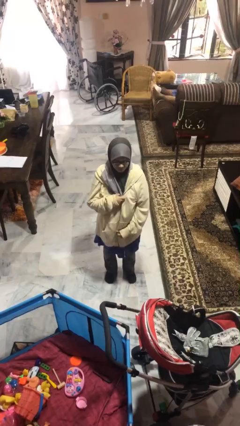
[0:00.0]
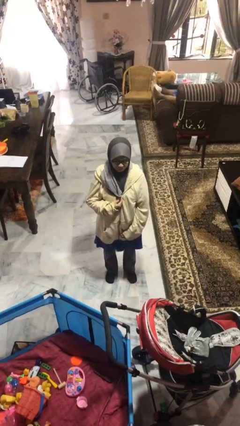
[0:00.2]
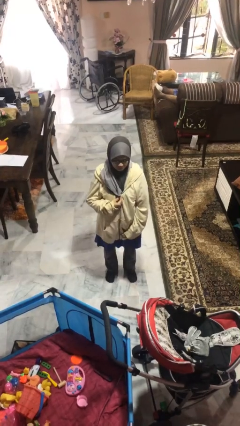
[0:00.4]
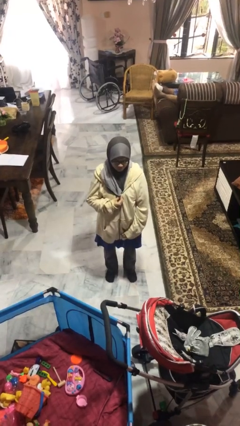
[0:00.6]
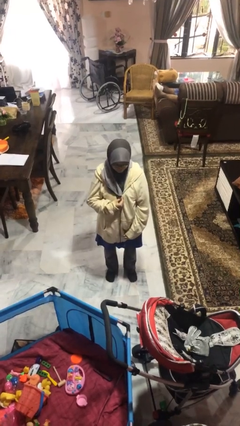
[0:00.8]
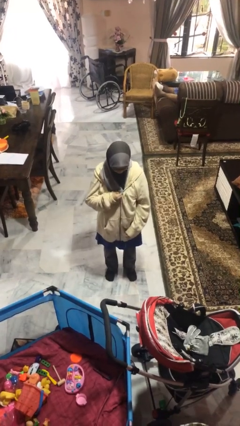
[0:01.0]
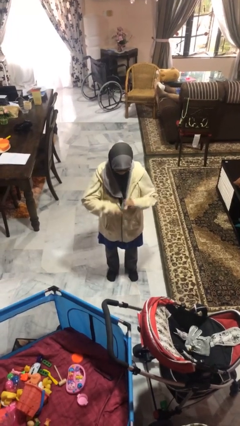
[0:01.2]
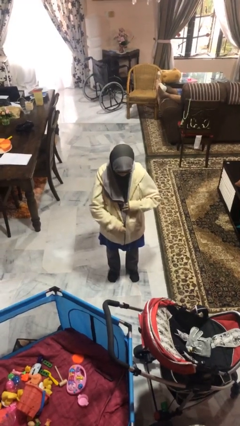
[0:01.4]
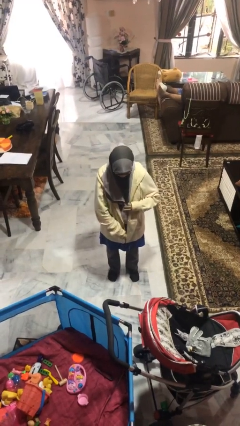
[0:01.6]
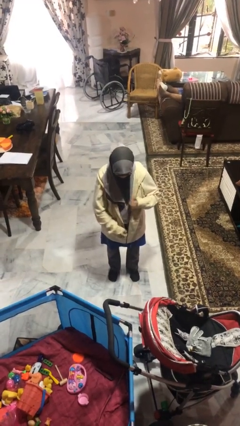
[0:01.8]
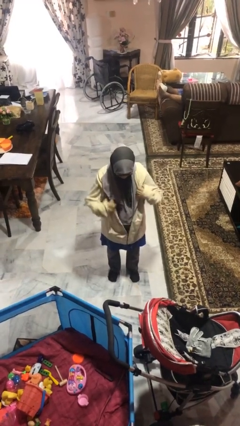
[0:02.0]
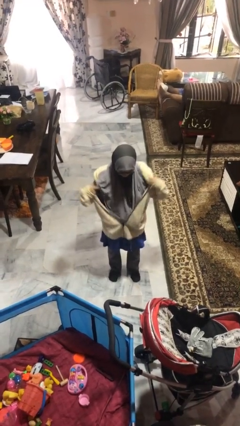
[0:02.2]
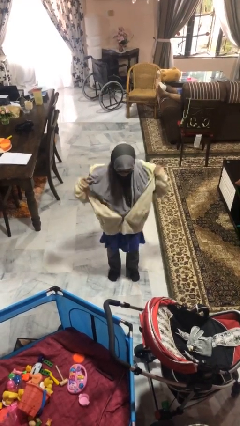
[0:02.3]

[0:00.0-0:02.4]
person unzips jacket

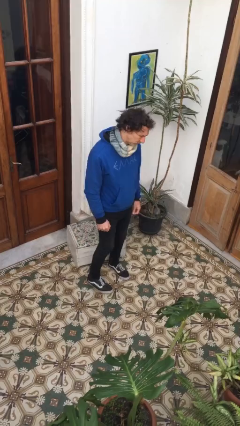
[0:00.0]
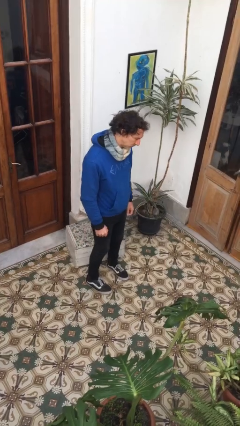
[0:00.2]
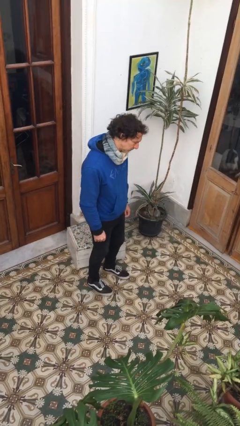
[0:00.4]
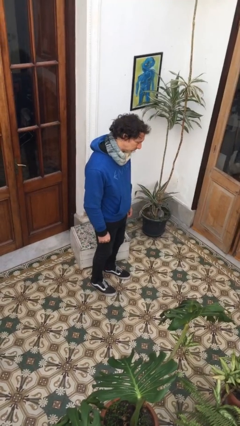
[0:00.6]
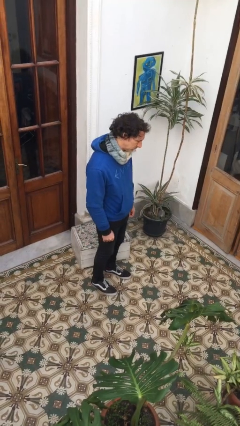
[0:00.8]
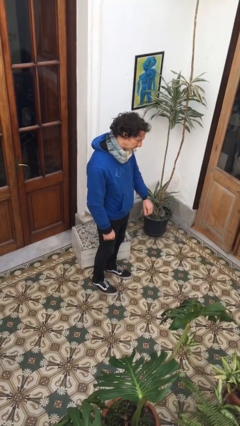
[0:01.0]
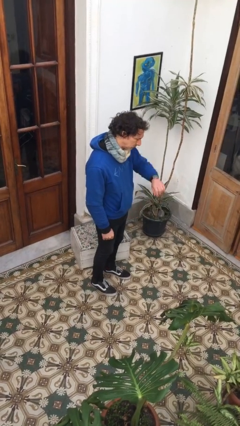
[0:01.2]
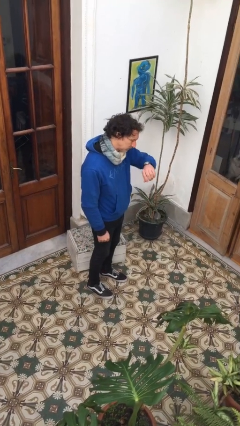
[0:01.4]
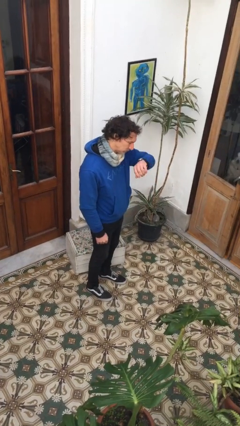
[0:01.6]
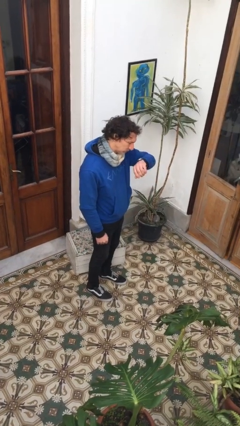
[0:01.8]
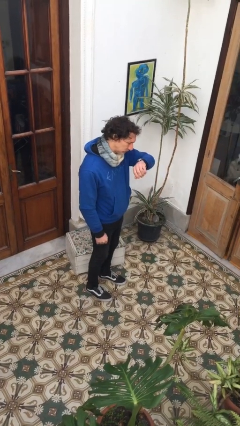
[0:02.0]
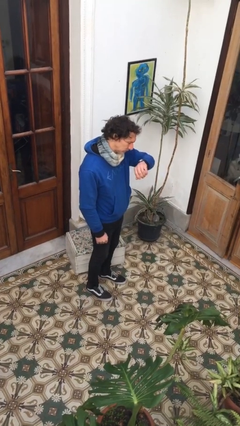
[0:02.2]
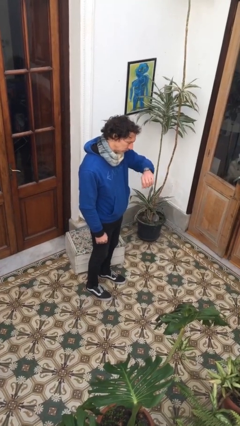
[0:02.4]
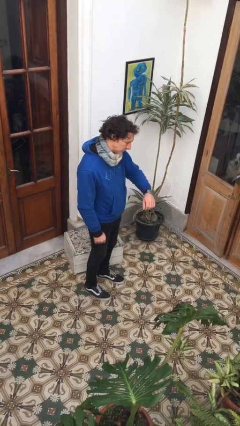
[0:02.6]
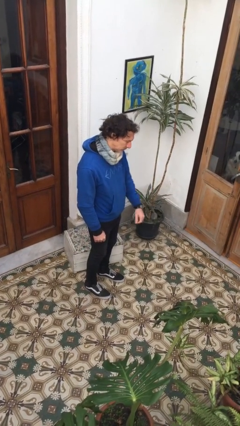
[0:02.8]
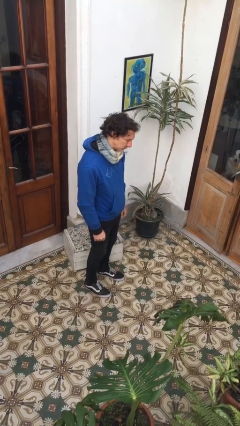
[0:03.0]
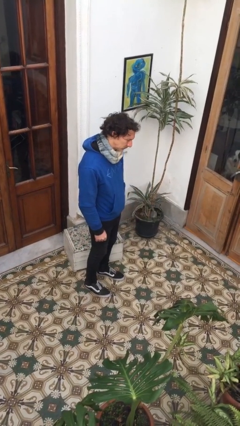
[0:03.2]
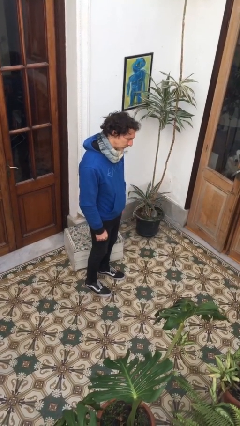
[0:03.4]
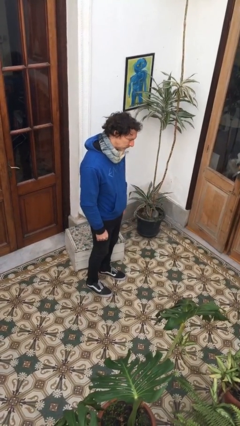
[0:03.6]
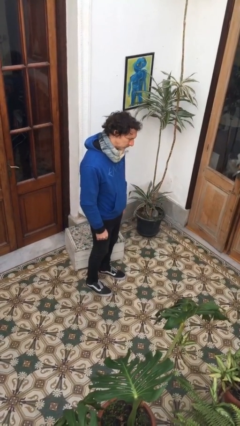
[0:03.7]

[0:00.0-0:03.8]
person looks at wristwatch

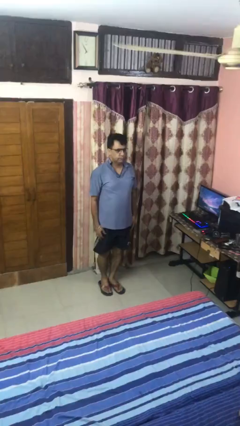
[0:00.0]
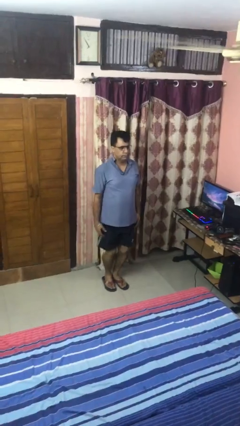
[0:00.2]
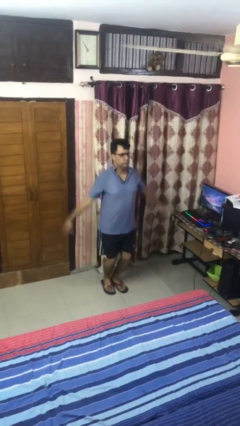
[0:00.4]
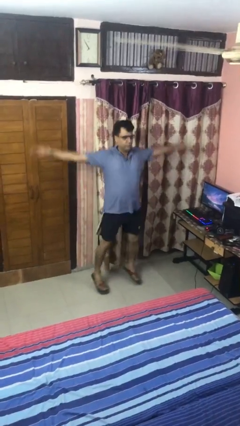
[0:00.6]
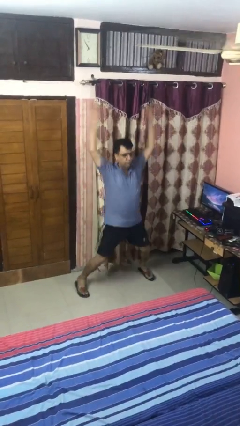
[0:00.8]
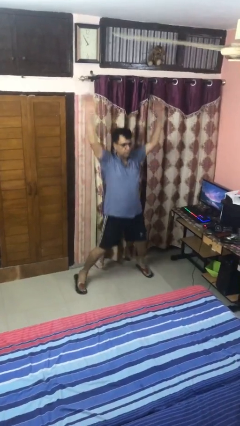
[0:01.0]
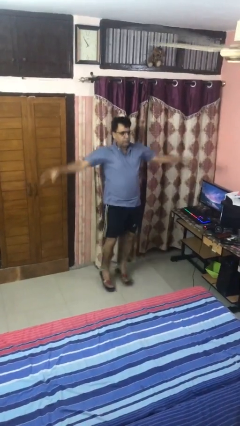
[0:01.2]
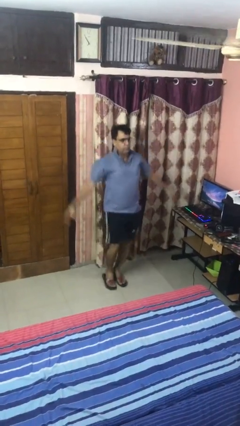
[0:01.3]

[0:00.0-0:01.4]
person exercises with jumping jacks

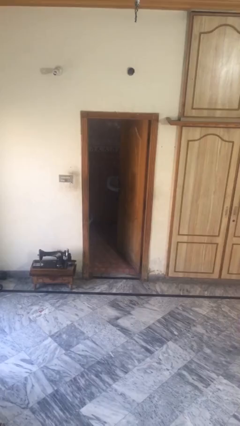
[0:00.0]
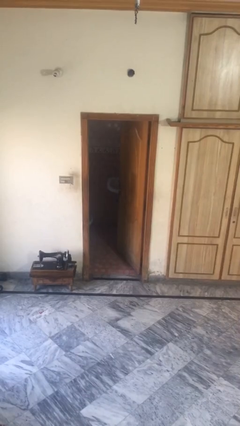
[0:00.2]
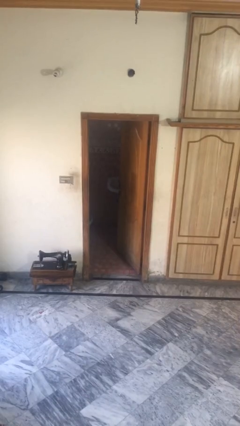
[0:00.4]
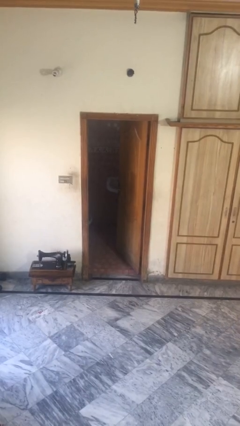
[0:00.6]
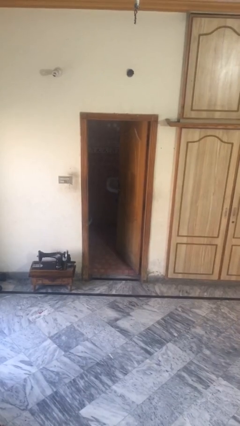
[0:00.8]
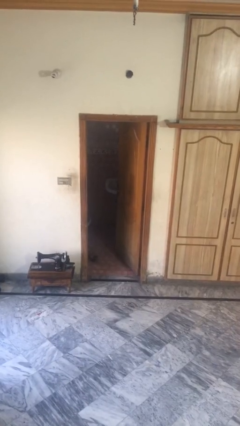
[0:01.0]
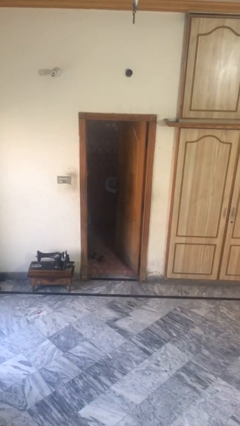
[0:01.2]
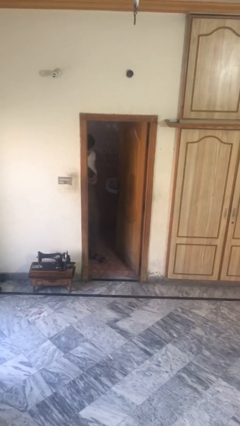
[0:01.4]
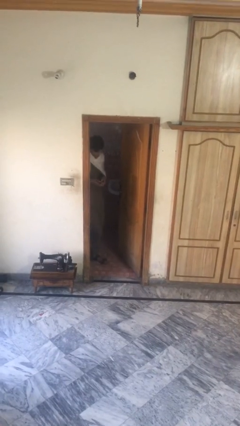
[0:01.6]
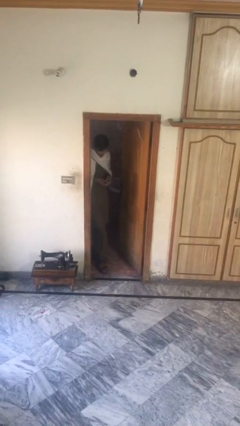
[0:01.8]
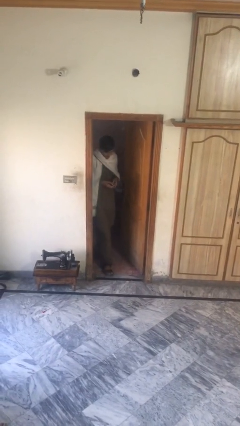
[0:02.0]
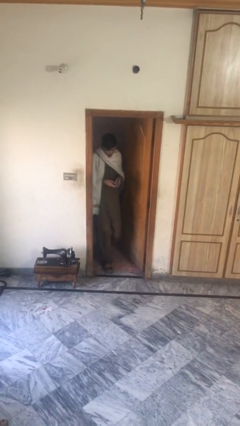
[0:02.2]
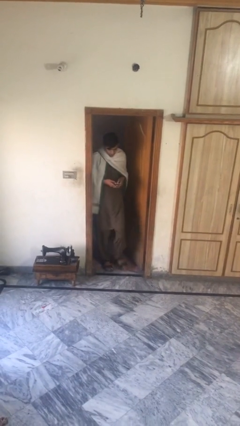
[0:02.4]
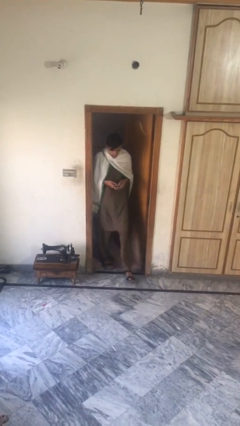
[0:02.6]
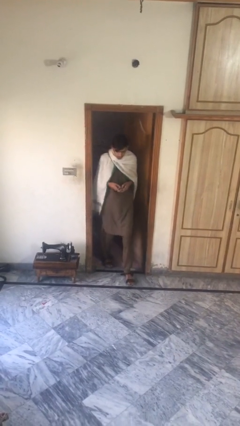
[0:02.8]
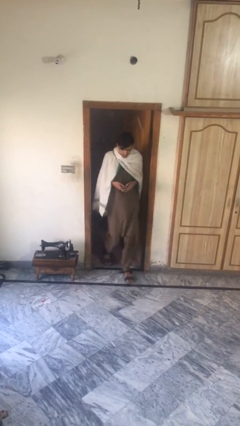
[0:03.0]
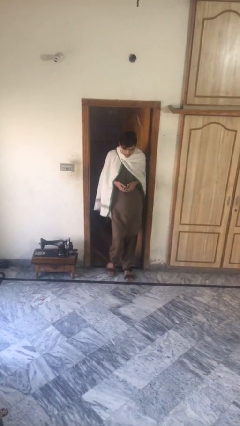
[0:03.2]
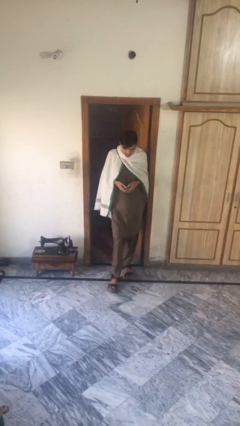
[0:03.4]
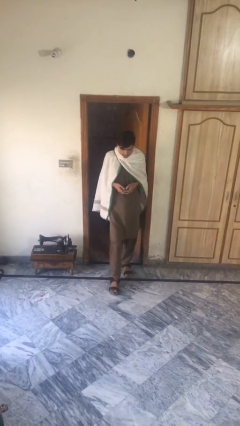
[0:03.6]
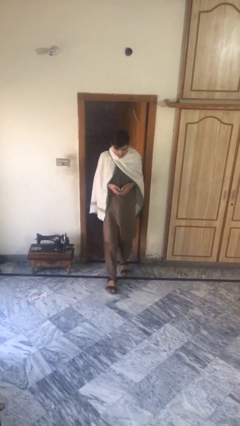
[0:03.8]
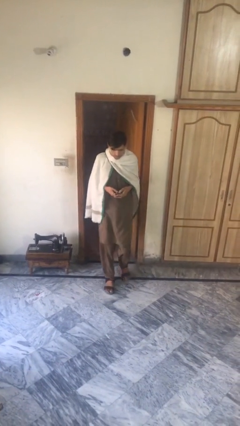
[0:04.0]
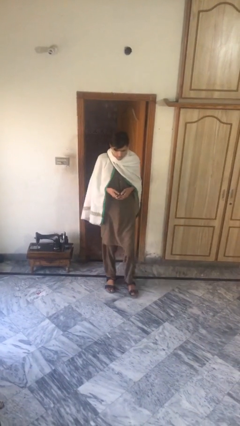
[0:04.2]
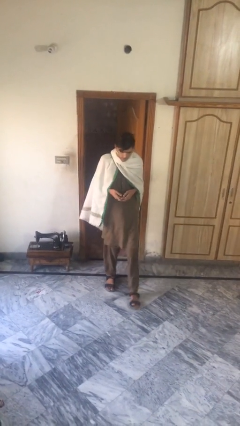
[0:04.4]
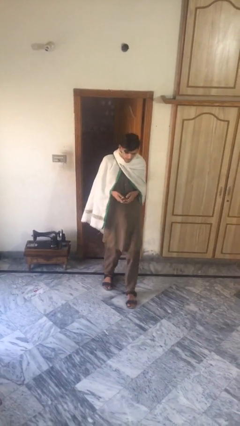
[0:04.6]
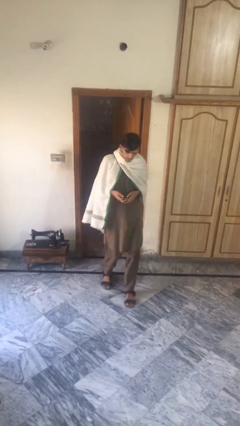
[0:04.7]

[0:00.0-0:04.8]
person enters scene through structure

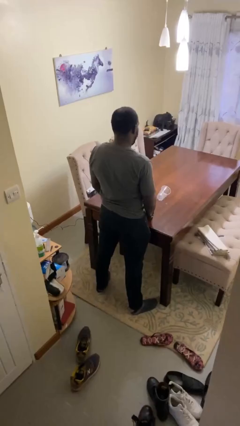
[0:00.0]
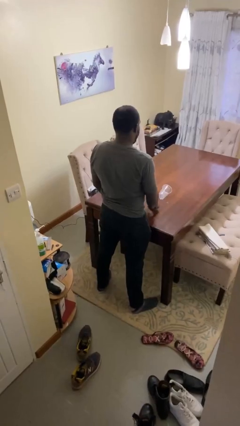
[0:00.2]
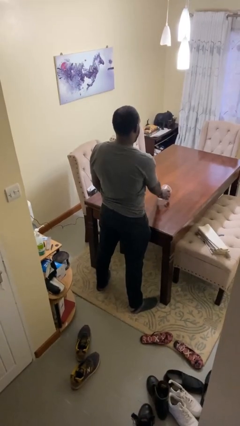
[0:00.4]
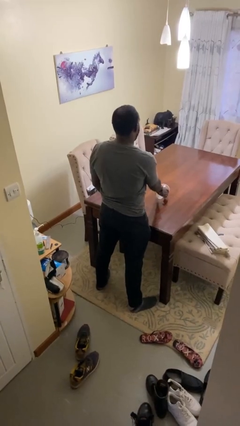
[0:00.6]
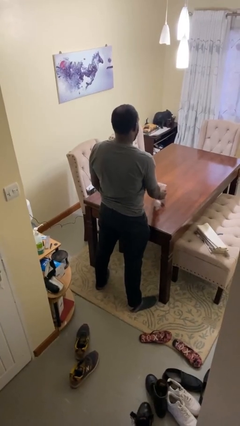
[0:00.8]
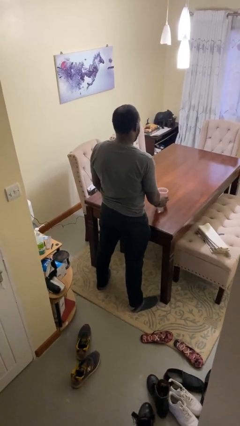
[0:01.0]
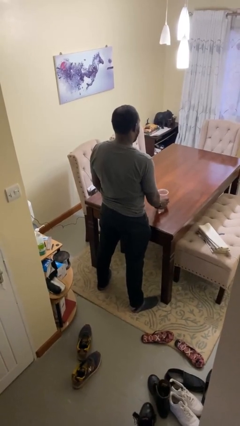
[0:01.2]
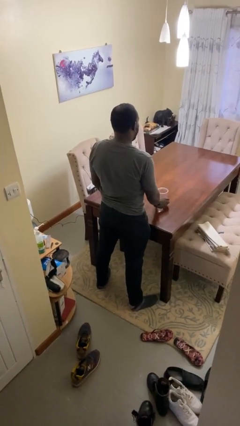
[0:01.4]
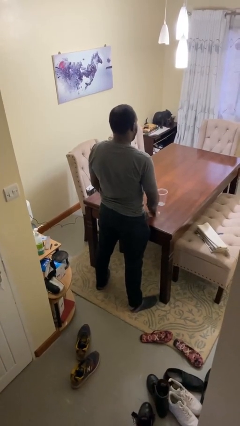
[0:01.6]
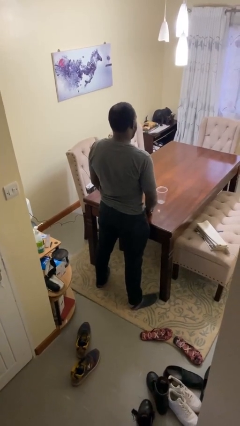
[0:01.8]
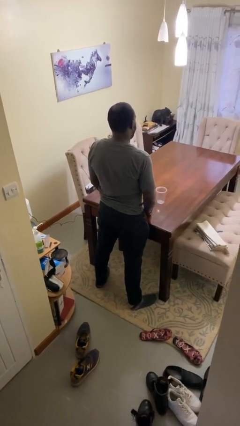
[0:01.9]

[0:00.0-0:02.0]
person sets upright glass

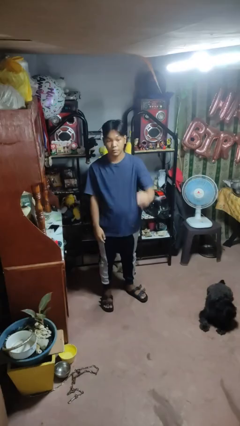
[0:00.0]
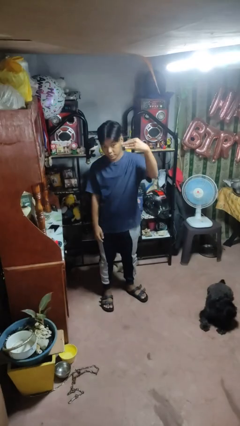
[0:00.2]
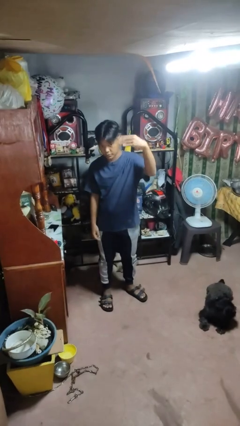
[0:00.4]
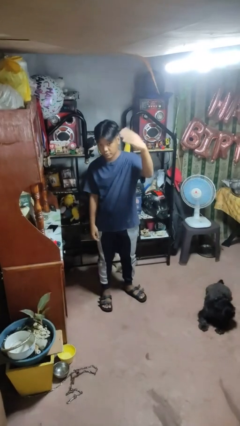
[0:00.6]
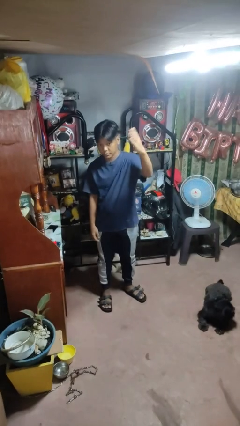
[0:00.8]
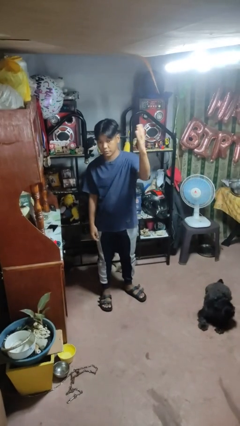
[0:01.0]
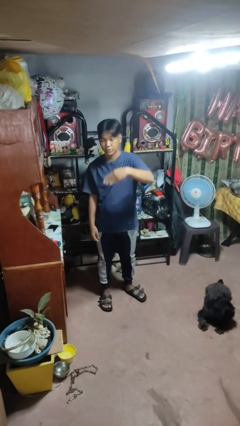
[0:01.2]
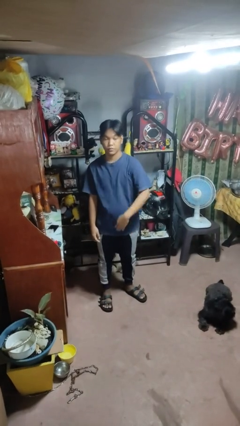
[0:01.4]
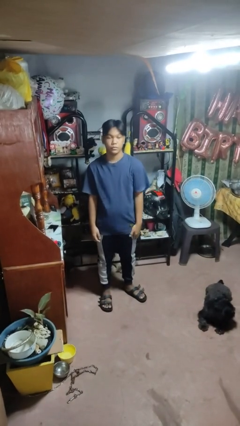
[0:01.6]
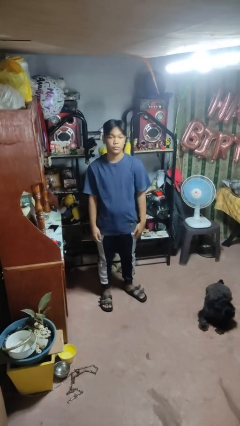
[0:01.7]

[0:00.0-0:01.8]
person gestures come here

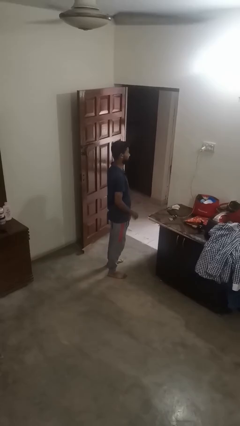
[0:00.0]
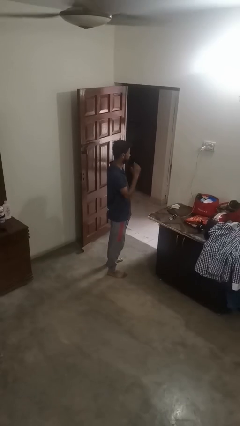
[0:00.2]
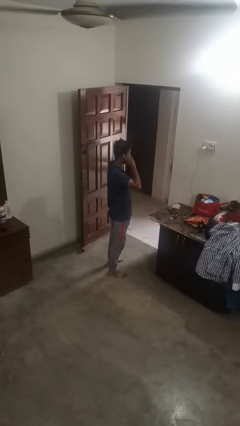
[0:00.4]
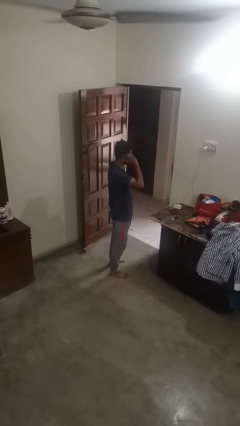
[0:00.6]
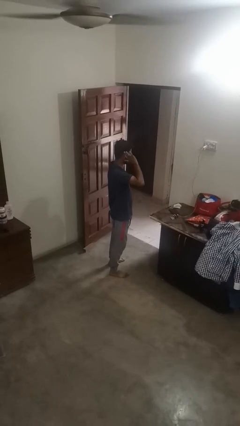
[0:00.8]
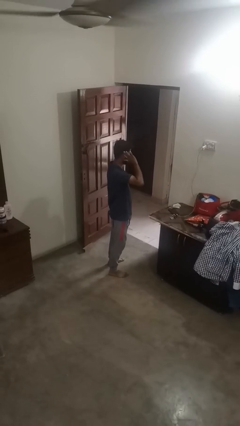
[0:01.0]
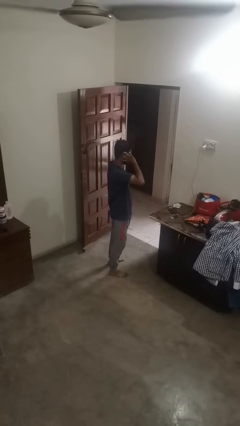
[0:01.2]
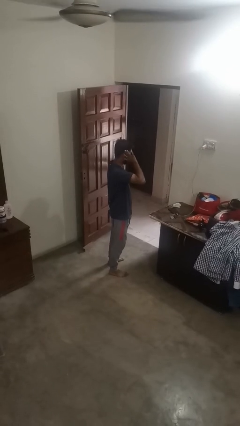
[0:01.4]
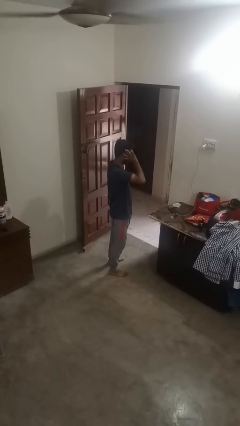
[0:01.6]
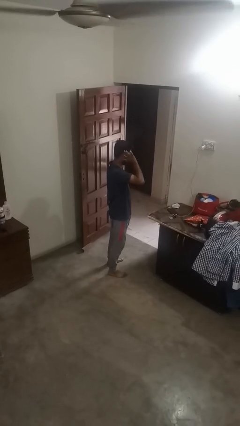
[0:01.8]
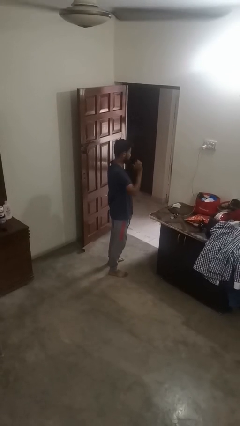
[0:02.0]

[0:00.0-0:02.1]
person touches earlobe
